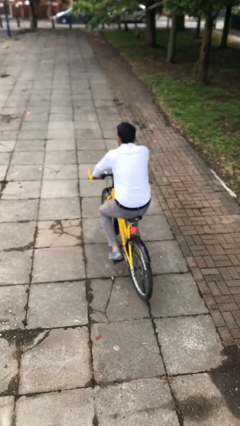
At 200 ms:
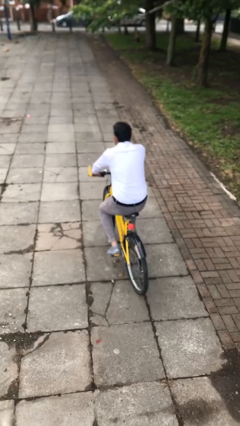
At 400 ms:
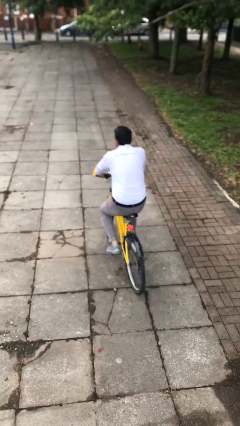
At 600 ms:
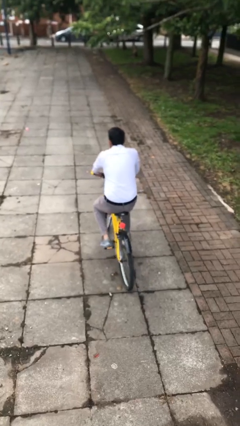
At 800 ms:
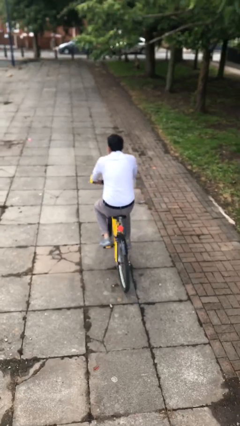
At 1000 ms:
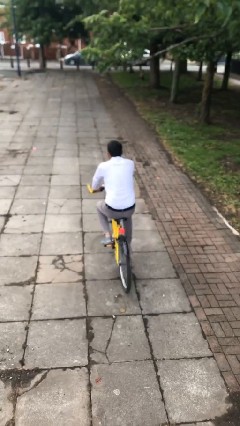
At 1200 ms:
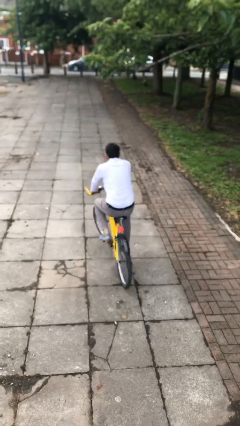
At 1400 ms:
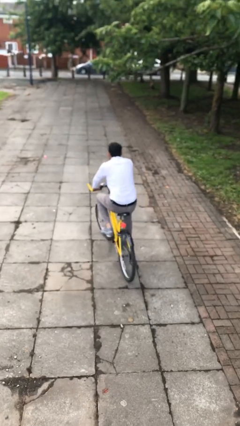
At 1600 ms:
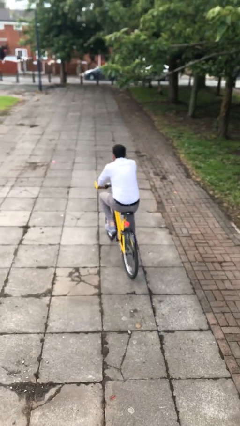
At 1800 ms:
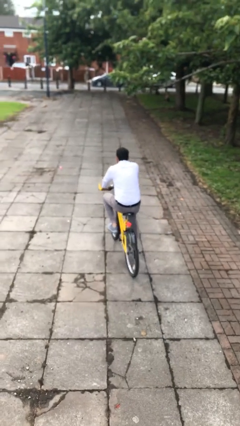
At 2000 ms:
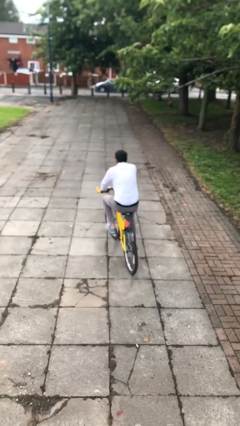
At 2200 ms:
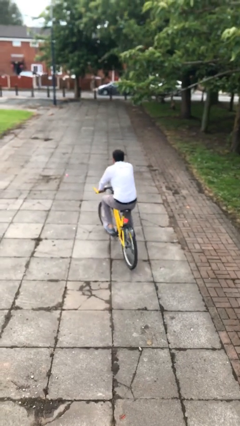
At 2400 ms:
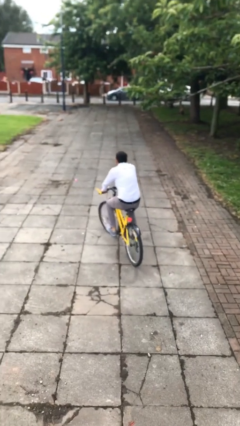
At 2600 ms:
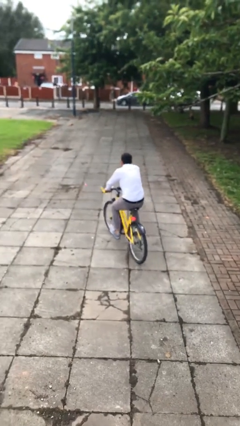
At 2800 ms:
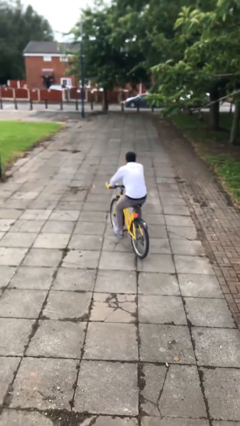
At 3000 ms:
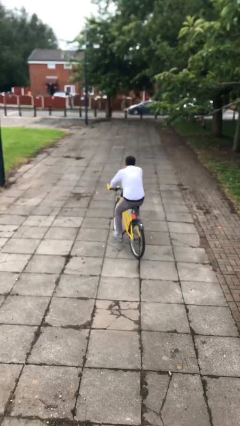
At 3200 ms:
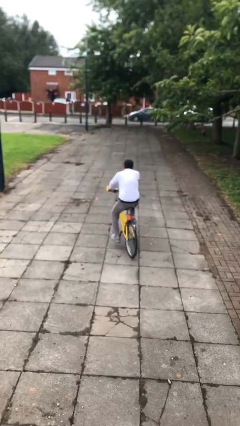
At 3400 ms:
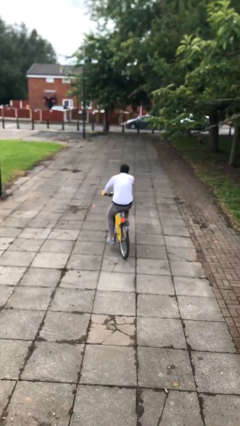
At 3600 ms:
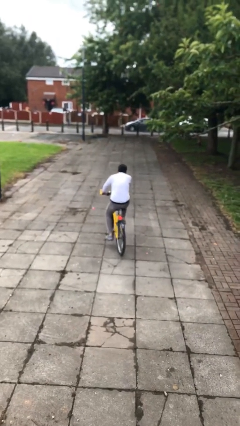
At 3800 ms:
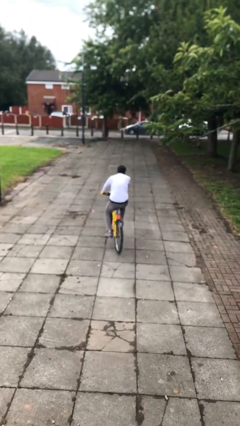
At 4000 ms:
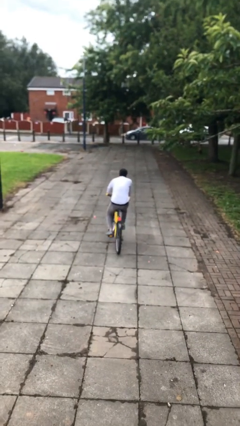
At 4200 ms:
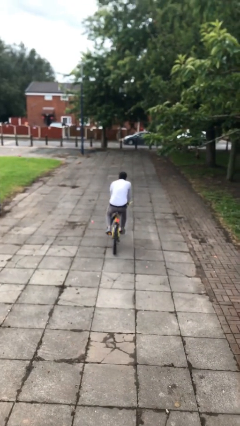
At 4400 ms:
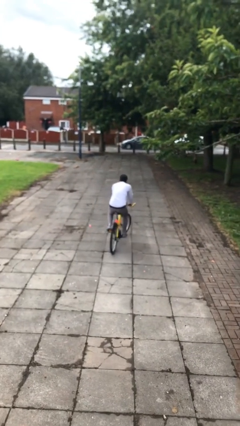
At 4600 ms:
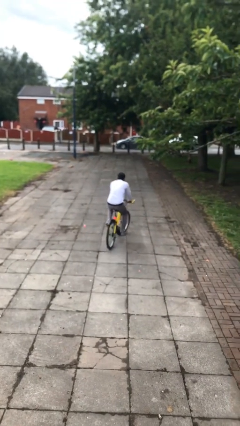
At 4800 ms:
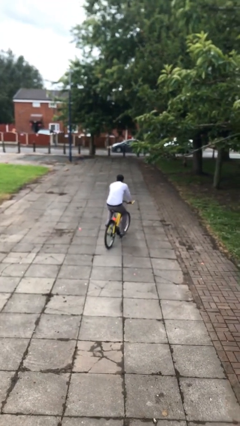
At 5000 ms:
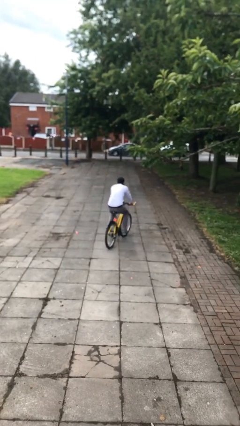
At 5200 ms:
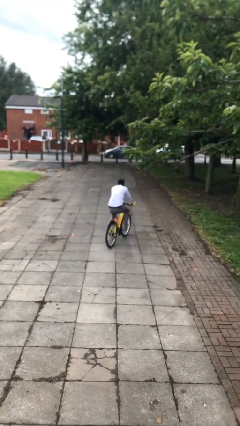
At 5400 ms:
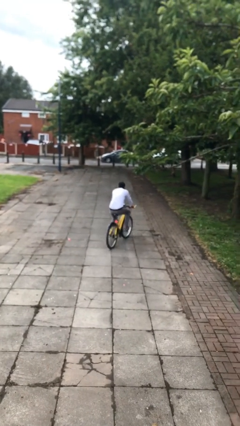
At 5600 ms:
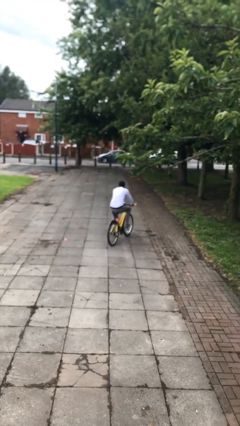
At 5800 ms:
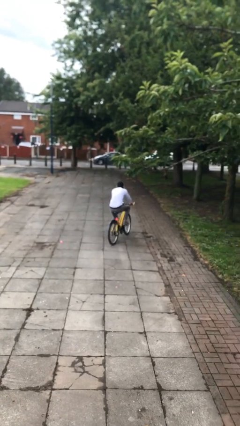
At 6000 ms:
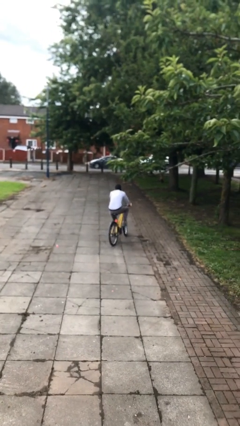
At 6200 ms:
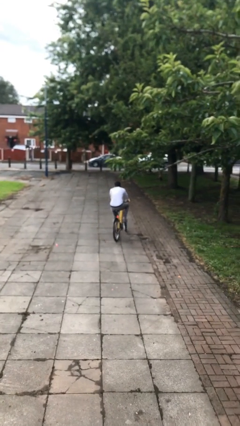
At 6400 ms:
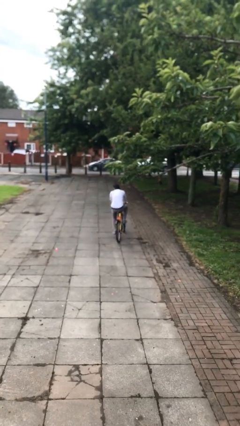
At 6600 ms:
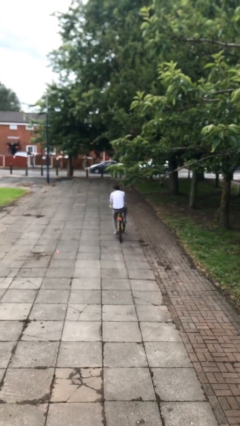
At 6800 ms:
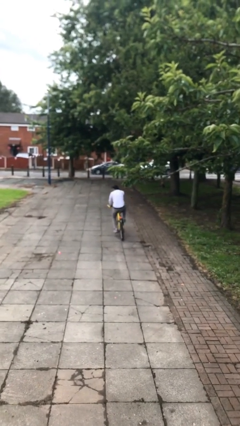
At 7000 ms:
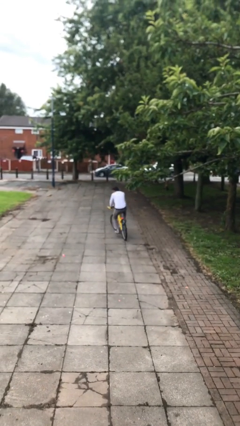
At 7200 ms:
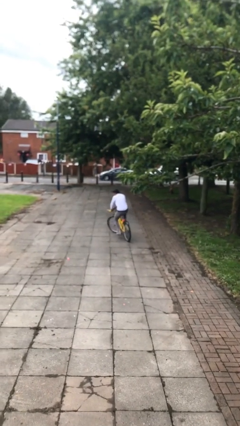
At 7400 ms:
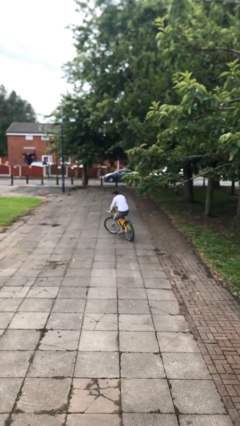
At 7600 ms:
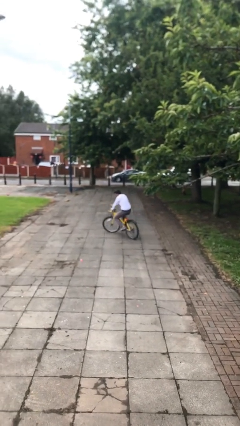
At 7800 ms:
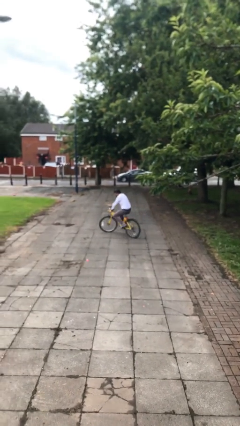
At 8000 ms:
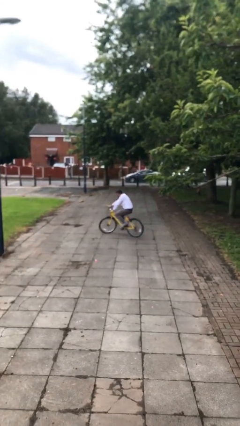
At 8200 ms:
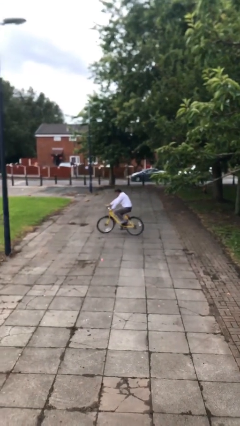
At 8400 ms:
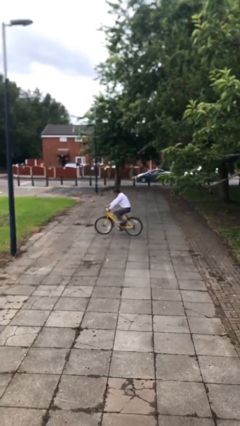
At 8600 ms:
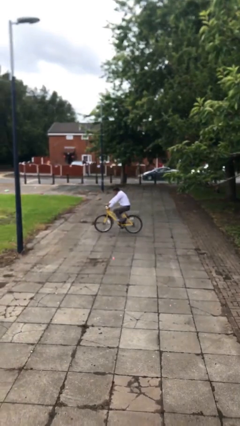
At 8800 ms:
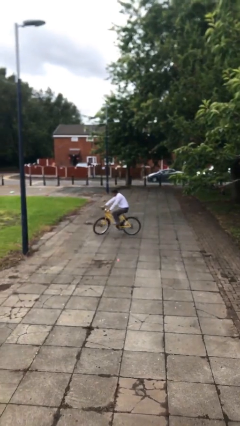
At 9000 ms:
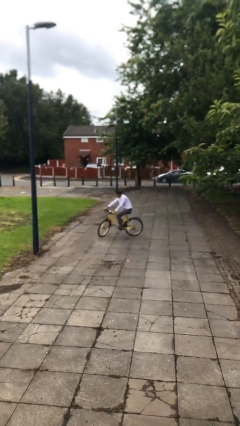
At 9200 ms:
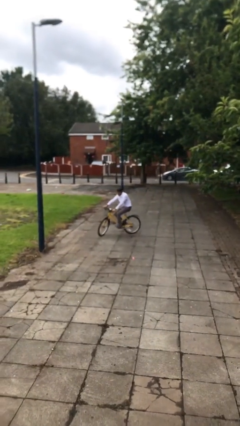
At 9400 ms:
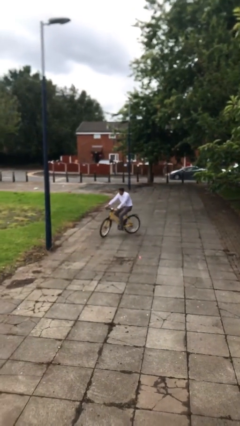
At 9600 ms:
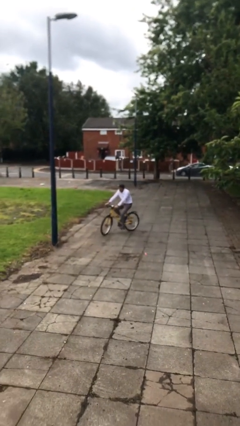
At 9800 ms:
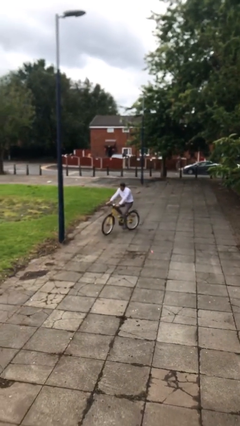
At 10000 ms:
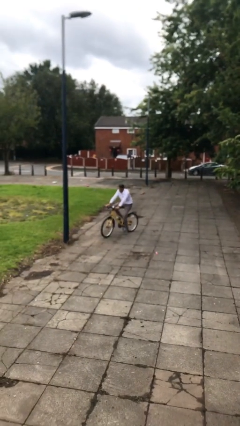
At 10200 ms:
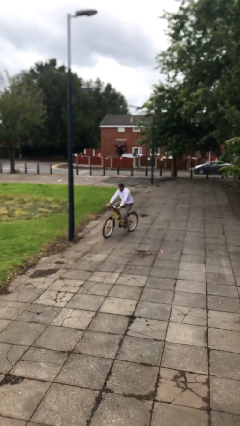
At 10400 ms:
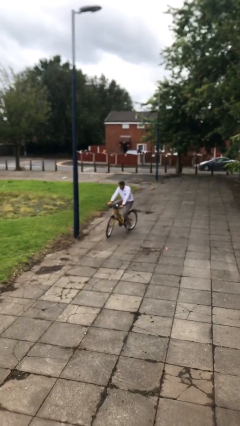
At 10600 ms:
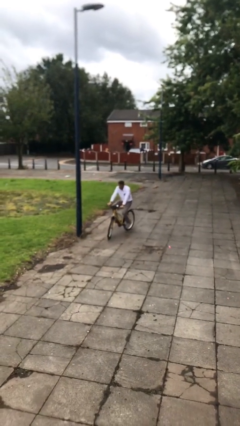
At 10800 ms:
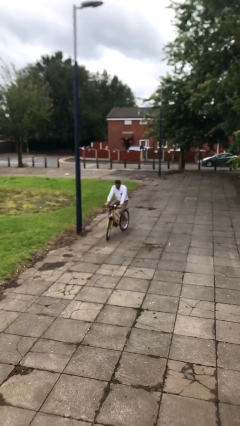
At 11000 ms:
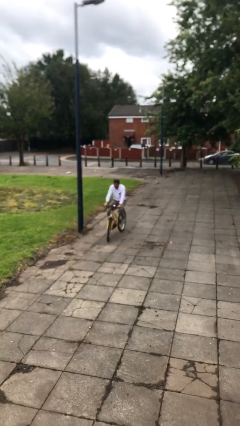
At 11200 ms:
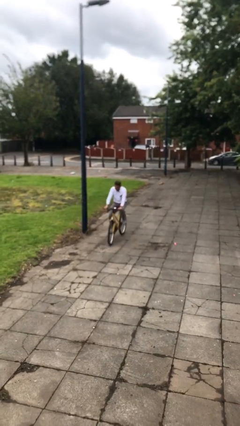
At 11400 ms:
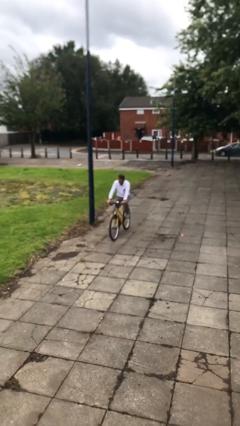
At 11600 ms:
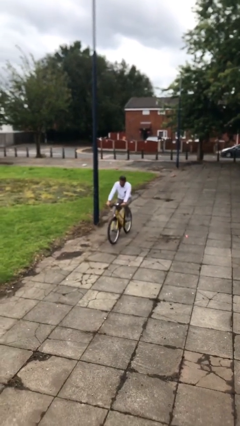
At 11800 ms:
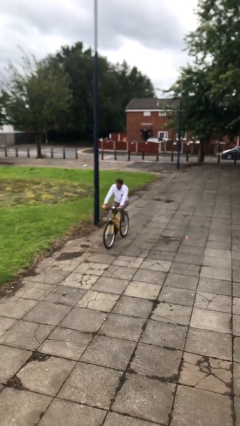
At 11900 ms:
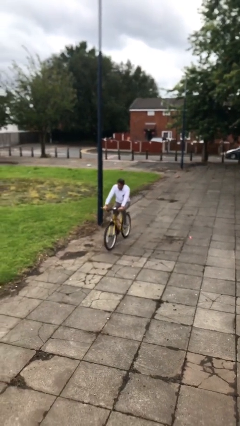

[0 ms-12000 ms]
person rides bicycle

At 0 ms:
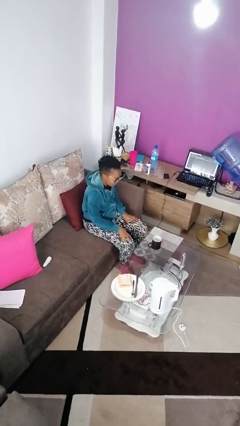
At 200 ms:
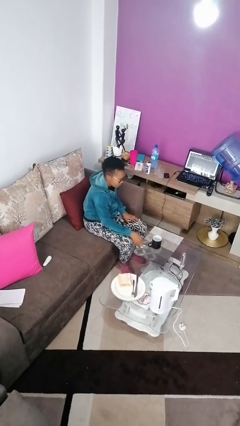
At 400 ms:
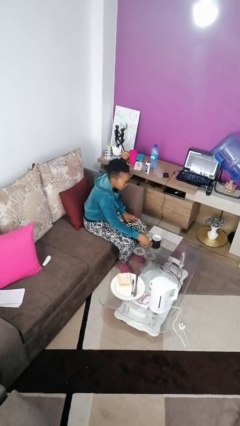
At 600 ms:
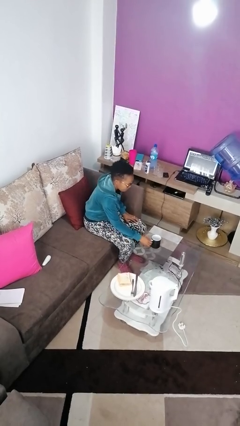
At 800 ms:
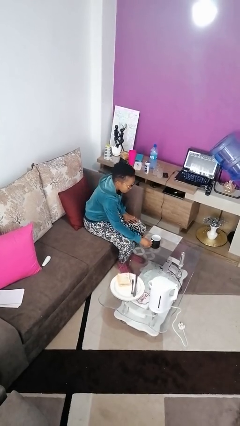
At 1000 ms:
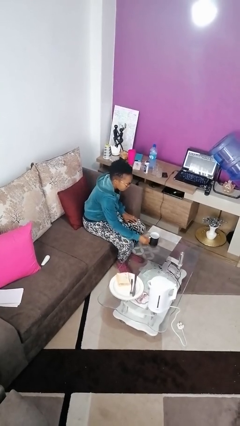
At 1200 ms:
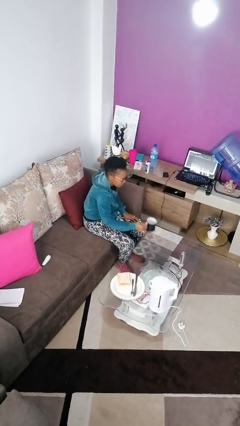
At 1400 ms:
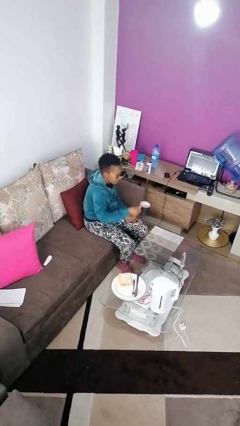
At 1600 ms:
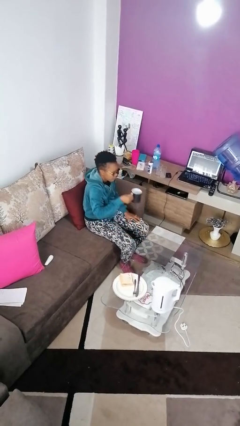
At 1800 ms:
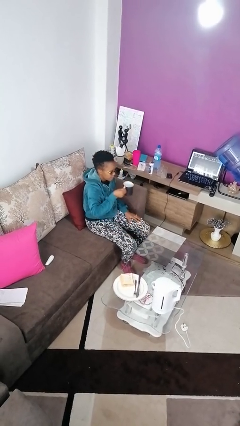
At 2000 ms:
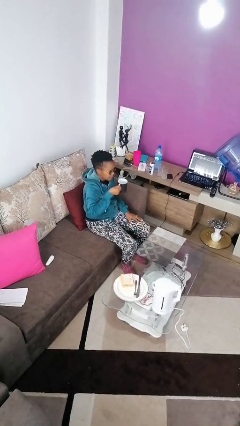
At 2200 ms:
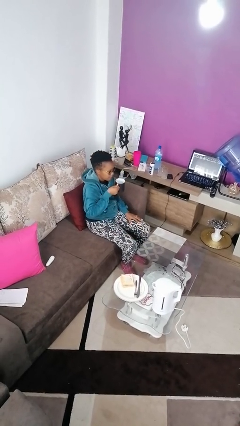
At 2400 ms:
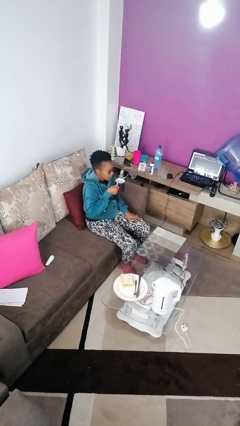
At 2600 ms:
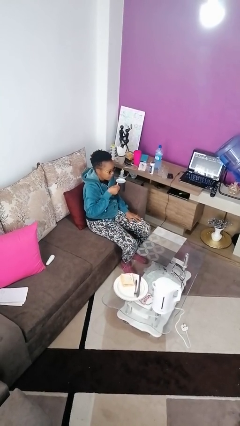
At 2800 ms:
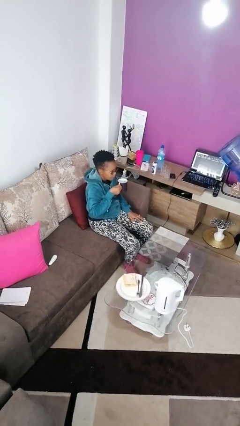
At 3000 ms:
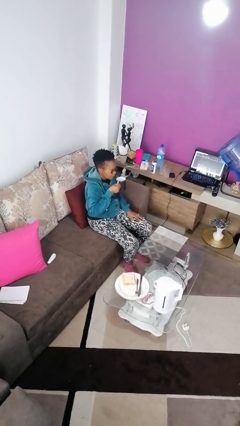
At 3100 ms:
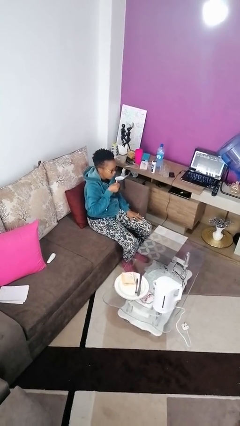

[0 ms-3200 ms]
person picks up object from table

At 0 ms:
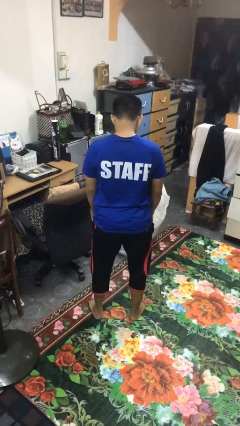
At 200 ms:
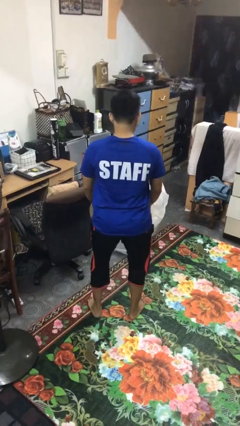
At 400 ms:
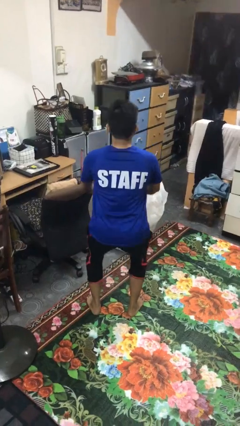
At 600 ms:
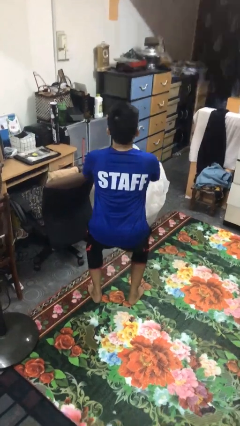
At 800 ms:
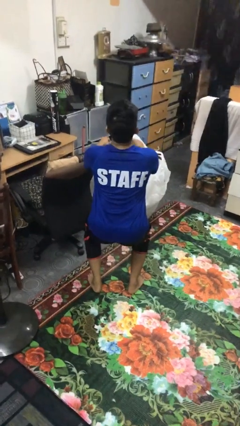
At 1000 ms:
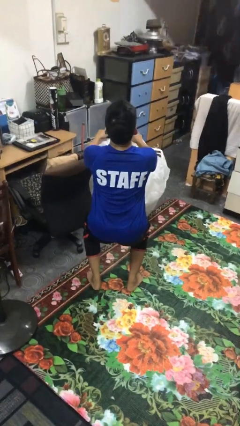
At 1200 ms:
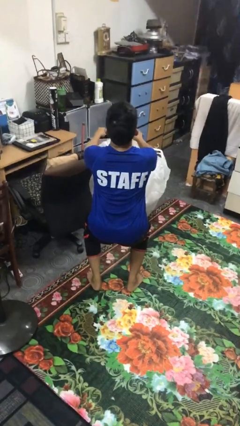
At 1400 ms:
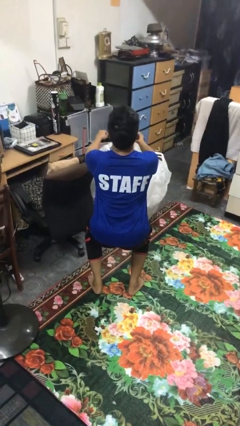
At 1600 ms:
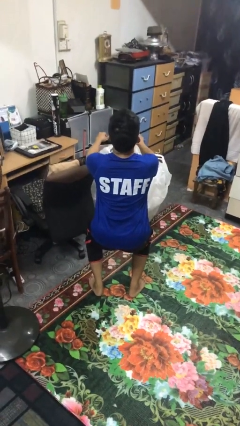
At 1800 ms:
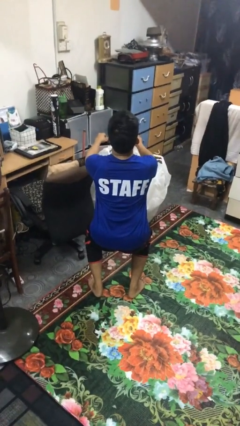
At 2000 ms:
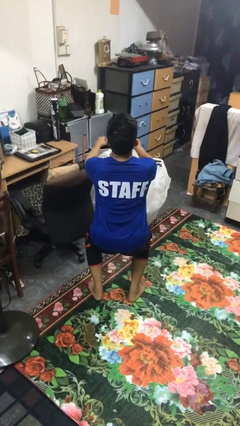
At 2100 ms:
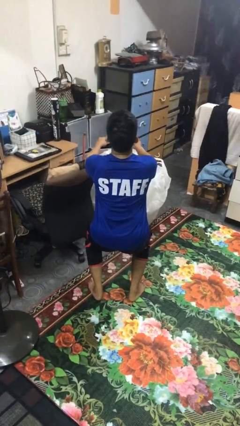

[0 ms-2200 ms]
person squats

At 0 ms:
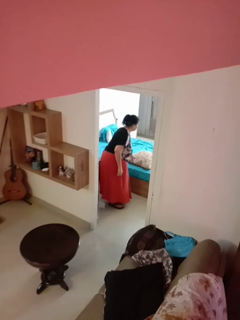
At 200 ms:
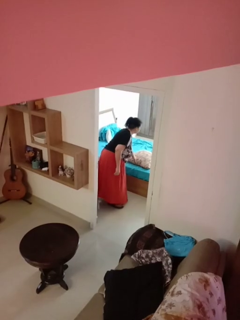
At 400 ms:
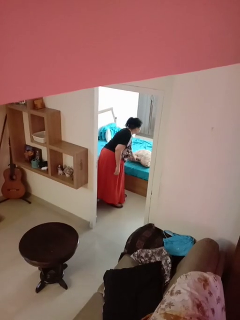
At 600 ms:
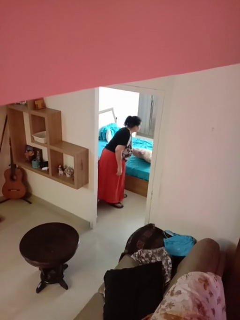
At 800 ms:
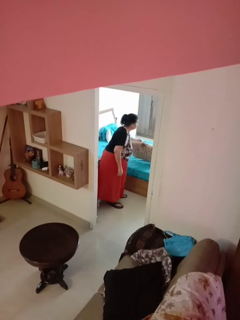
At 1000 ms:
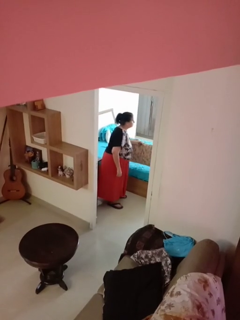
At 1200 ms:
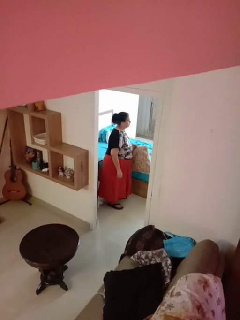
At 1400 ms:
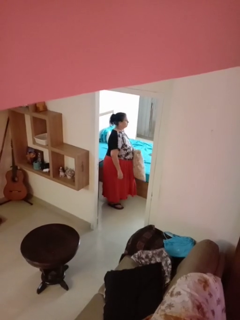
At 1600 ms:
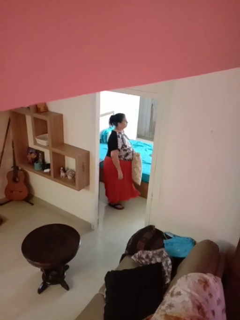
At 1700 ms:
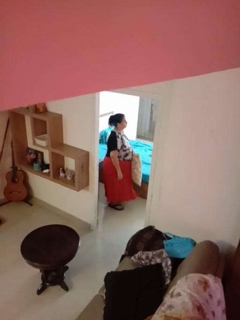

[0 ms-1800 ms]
person picks up object from bed
